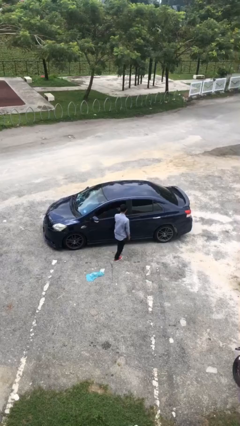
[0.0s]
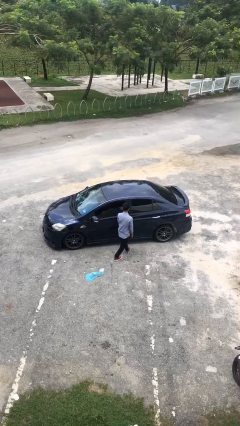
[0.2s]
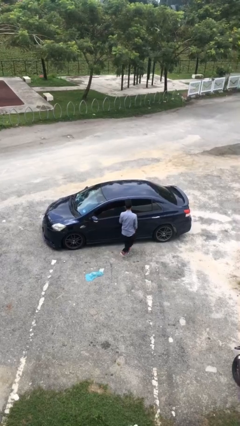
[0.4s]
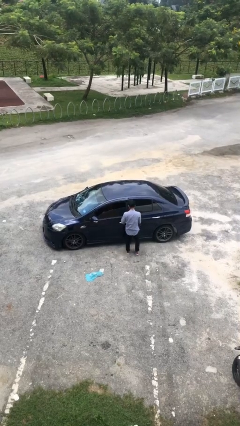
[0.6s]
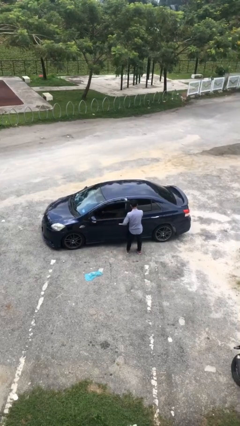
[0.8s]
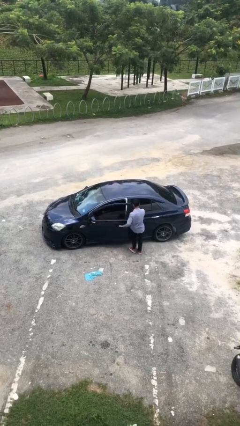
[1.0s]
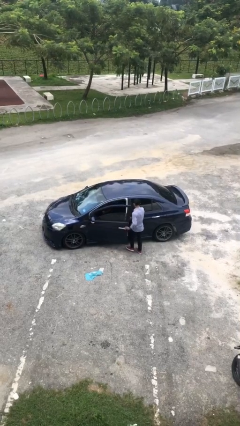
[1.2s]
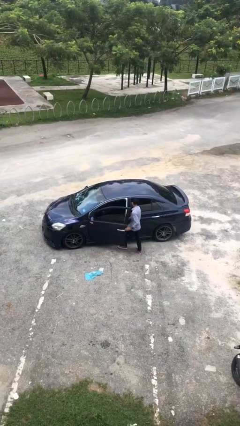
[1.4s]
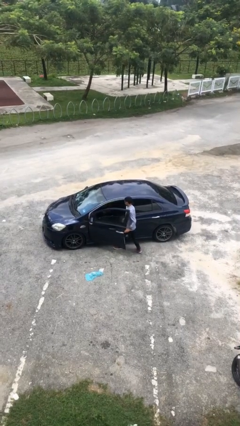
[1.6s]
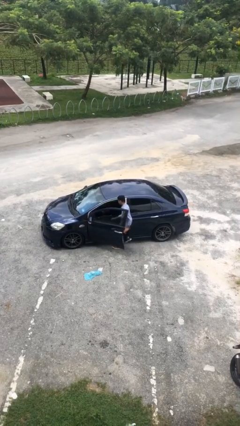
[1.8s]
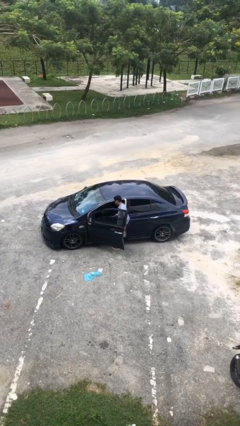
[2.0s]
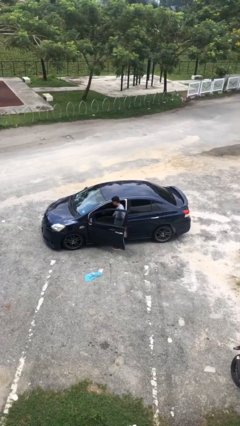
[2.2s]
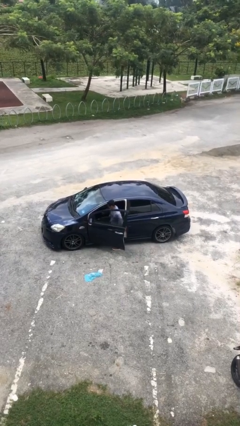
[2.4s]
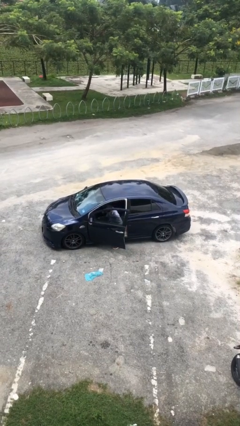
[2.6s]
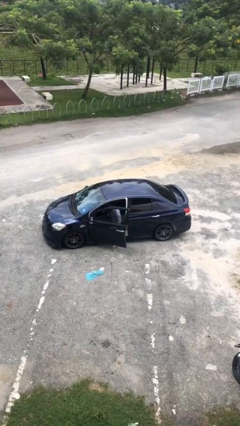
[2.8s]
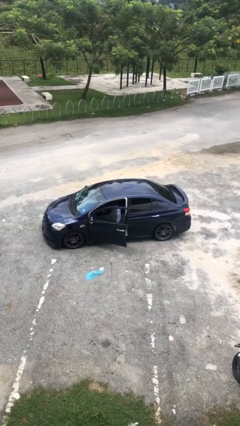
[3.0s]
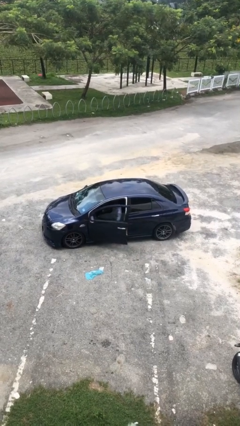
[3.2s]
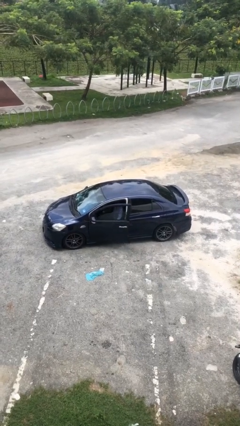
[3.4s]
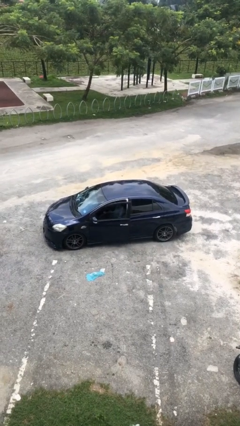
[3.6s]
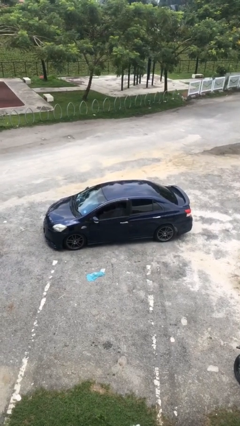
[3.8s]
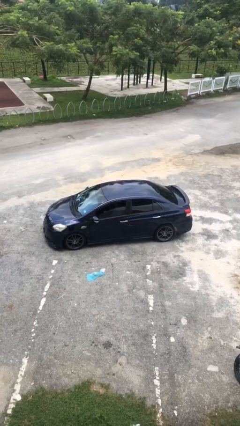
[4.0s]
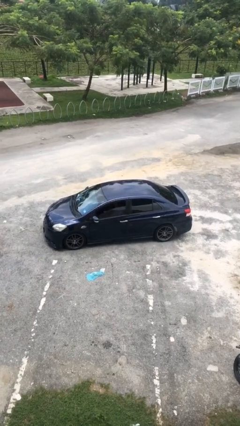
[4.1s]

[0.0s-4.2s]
car picks up person

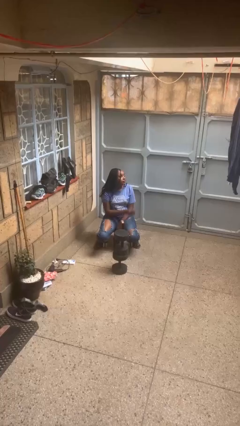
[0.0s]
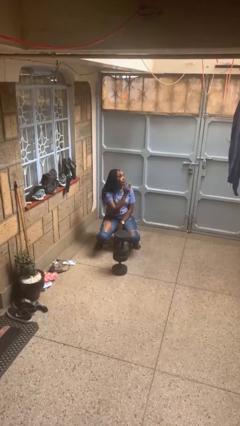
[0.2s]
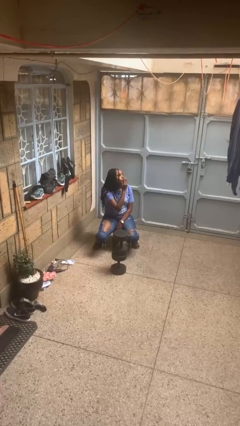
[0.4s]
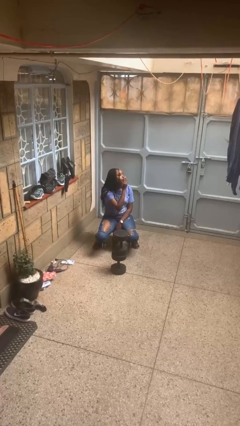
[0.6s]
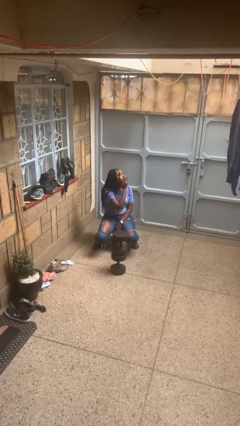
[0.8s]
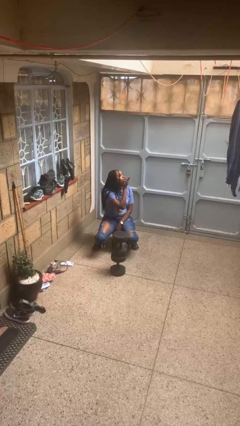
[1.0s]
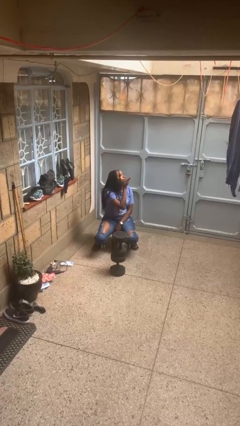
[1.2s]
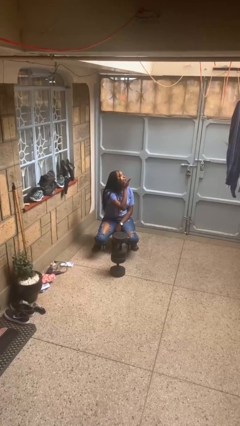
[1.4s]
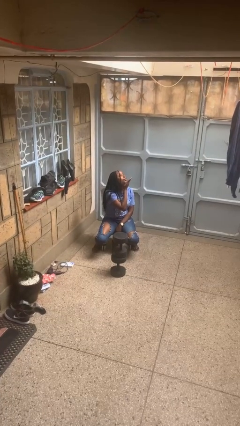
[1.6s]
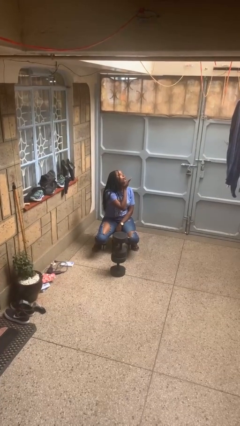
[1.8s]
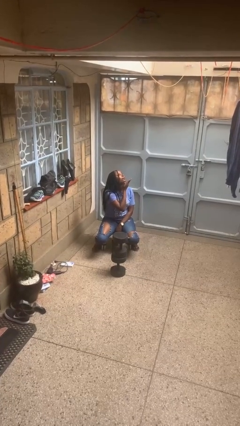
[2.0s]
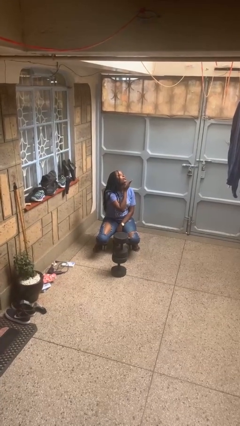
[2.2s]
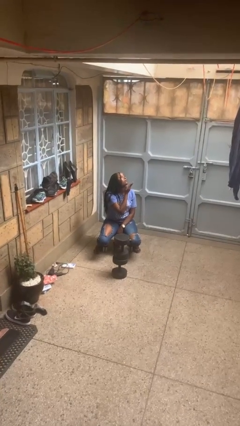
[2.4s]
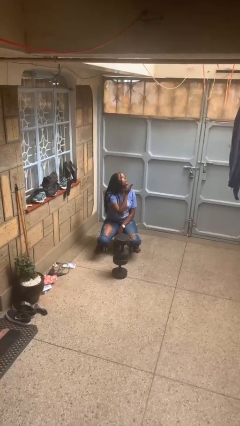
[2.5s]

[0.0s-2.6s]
person gestures blow kiss

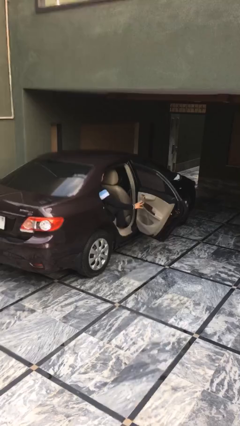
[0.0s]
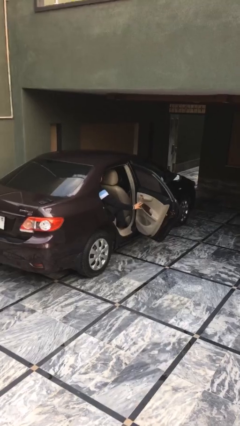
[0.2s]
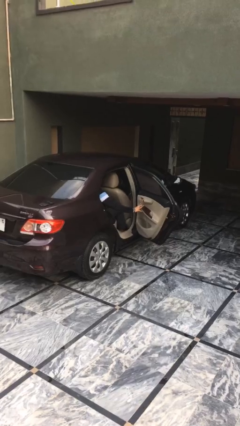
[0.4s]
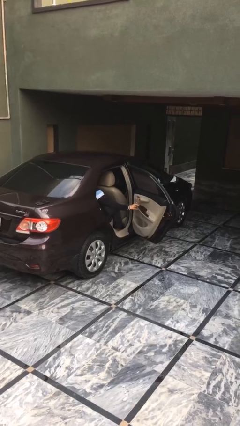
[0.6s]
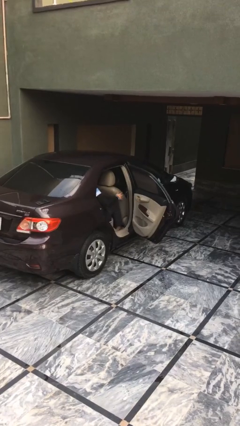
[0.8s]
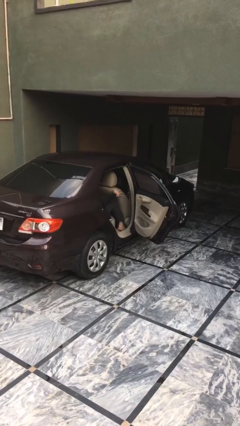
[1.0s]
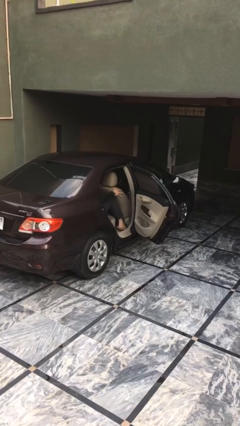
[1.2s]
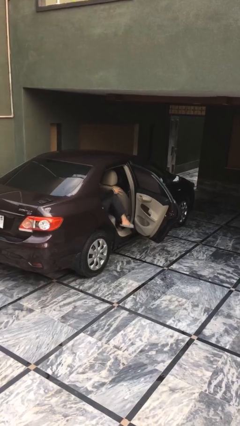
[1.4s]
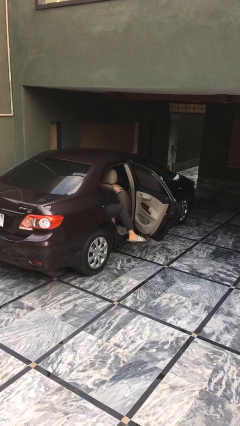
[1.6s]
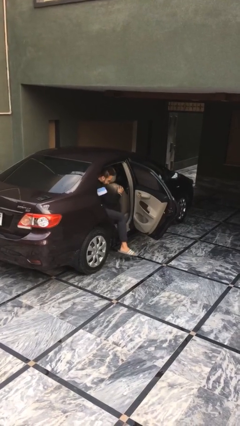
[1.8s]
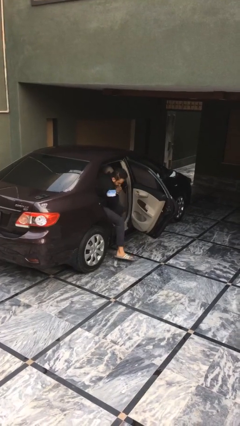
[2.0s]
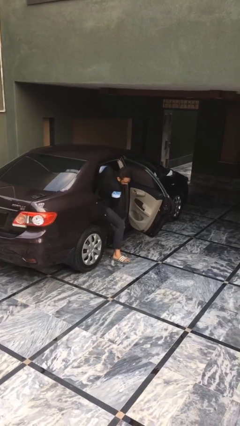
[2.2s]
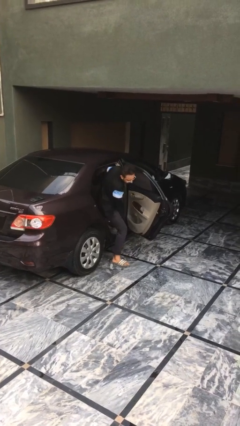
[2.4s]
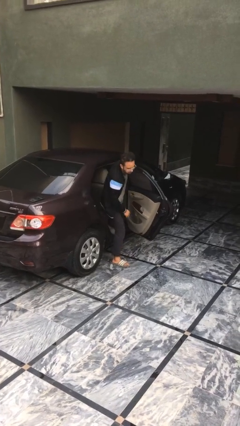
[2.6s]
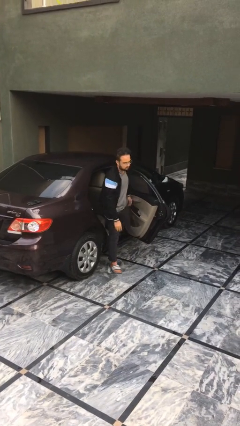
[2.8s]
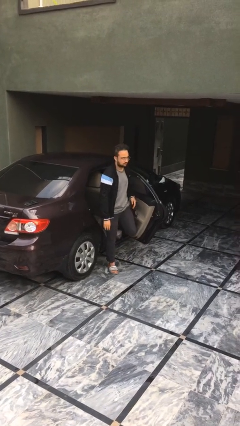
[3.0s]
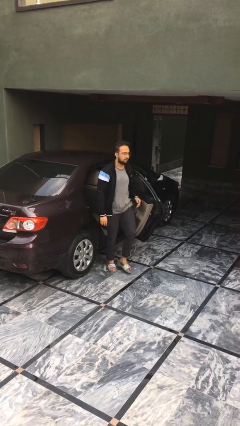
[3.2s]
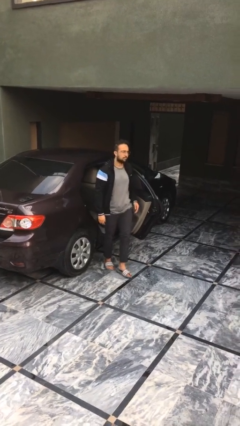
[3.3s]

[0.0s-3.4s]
person exits car

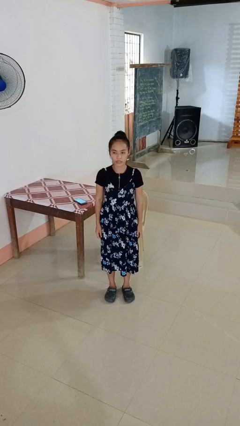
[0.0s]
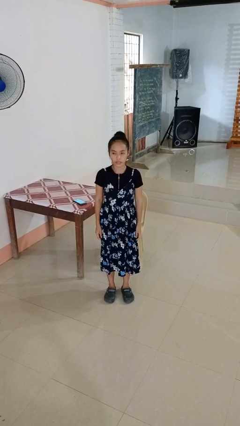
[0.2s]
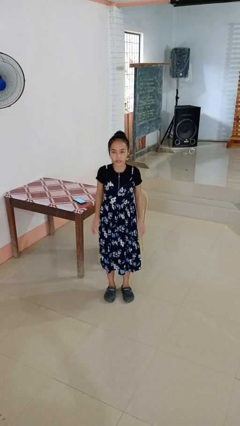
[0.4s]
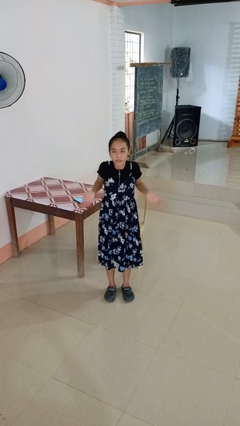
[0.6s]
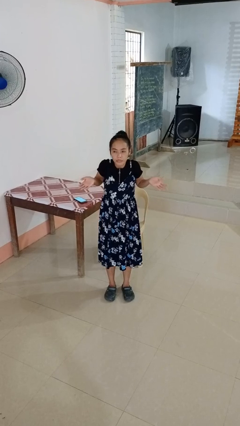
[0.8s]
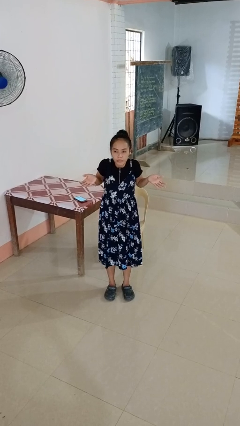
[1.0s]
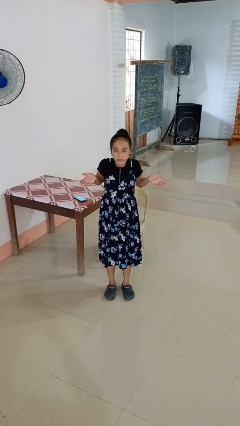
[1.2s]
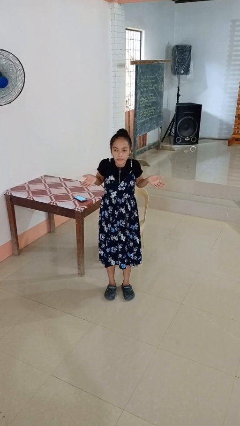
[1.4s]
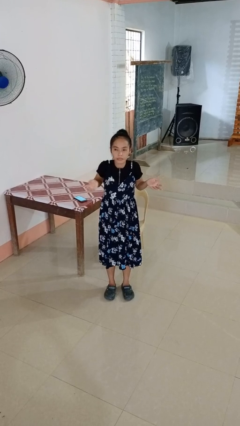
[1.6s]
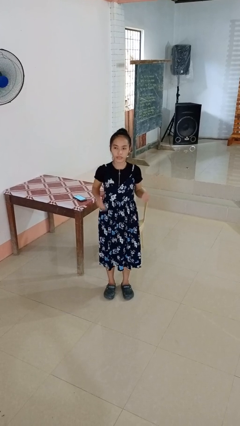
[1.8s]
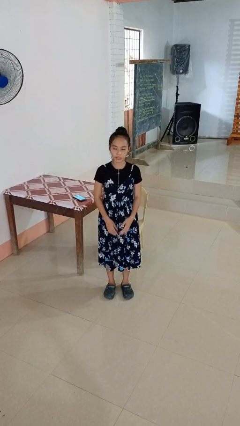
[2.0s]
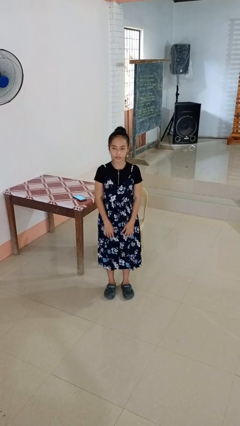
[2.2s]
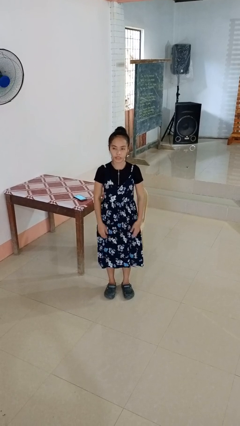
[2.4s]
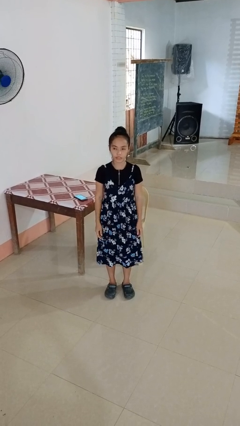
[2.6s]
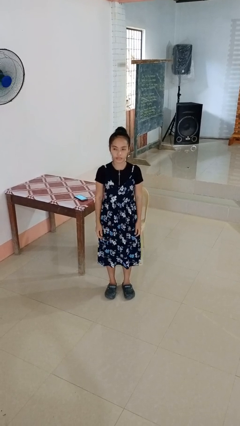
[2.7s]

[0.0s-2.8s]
person shrugs

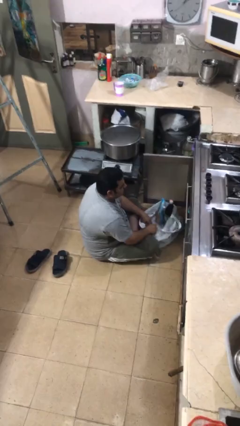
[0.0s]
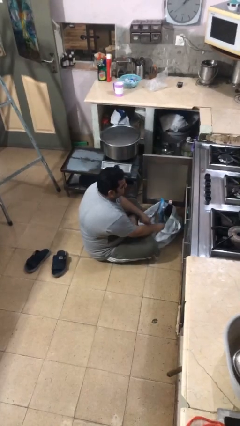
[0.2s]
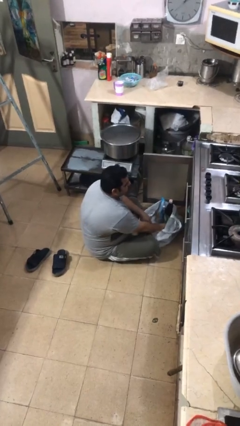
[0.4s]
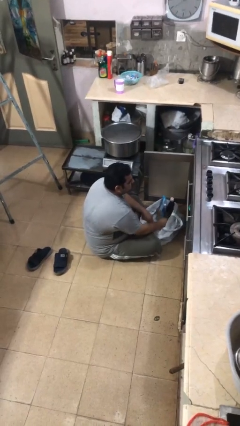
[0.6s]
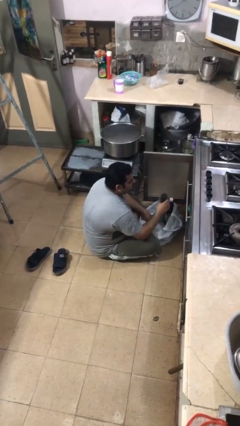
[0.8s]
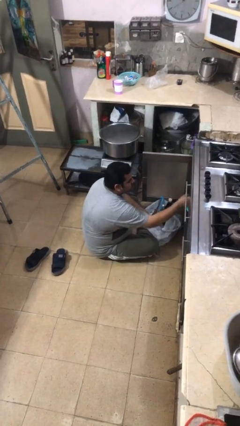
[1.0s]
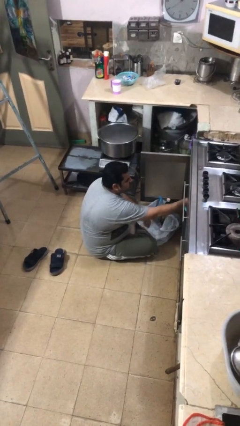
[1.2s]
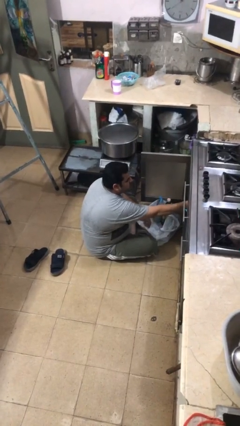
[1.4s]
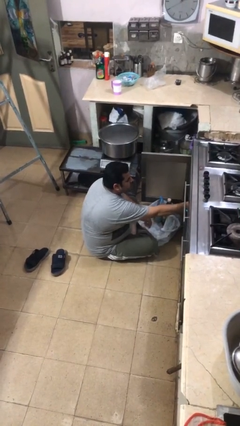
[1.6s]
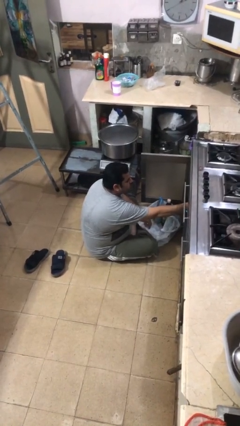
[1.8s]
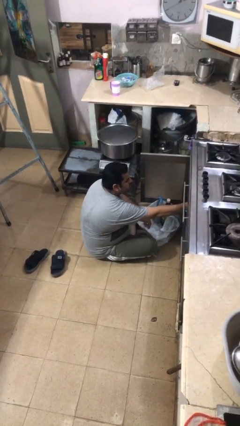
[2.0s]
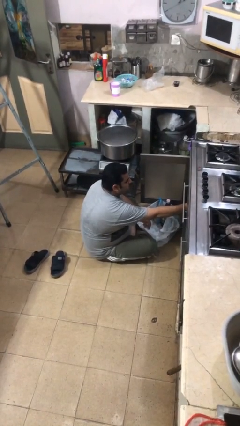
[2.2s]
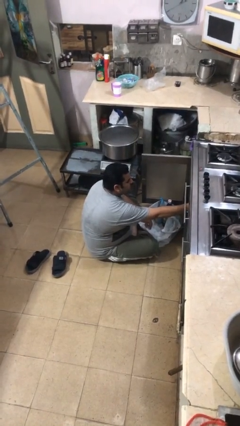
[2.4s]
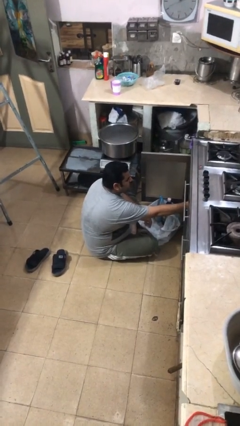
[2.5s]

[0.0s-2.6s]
person loads groceries into cabinet

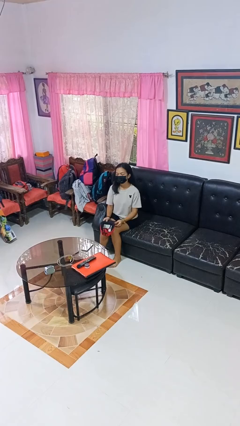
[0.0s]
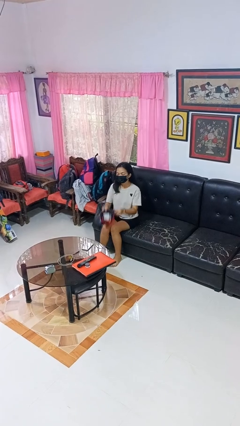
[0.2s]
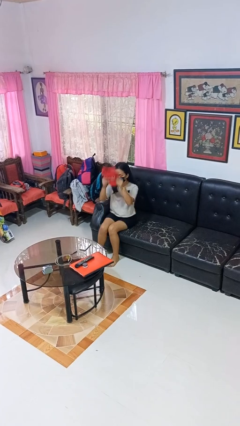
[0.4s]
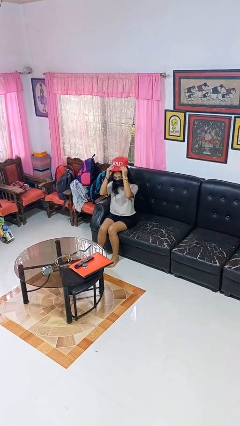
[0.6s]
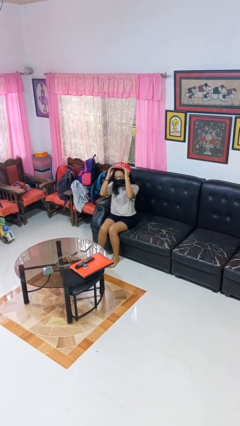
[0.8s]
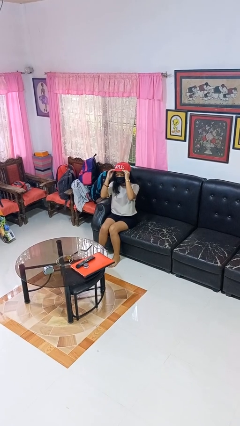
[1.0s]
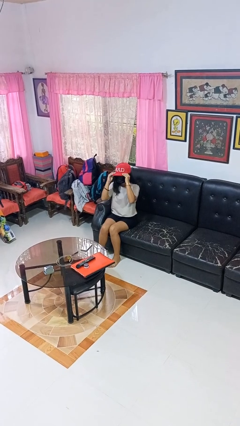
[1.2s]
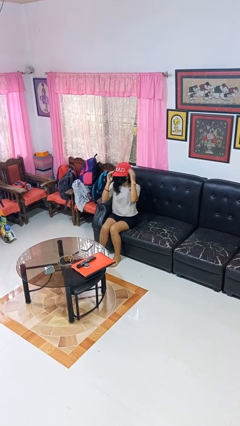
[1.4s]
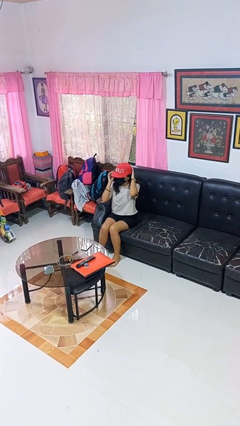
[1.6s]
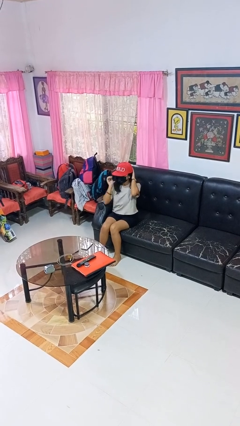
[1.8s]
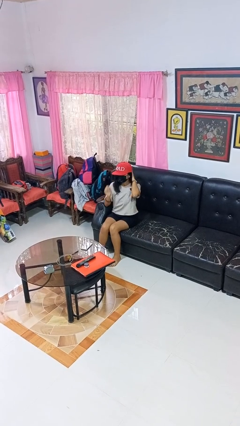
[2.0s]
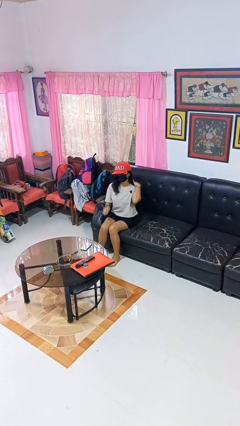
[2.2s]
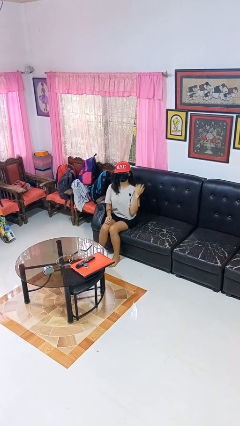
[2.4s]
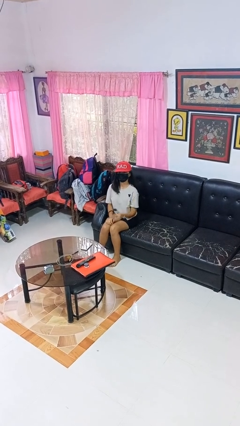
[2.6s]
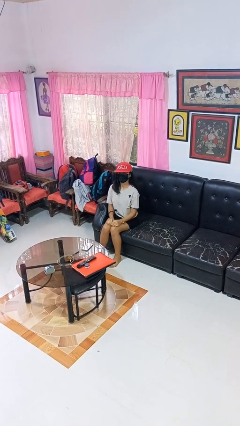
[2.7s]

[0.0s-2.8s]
person puts on hat
